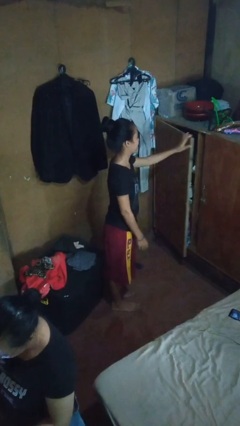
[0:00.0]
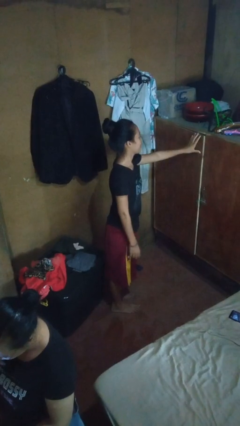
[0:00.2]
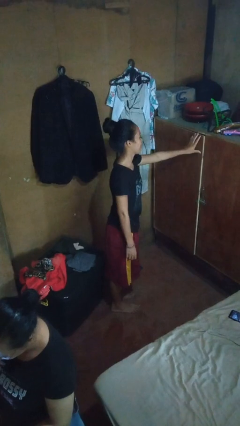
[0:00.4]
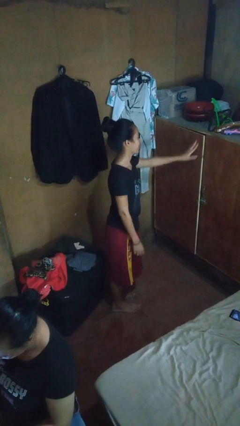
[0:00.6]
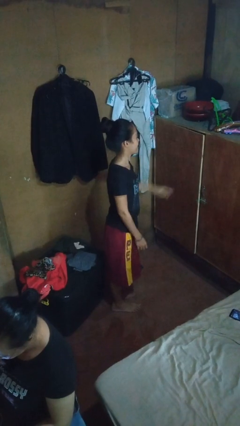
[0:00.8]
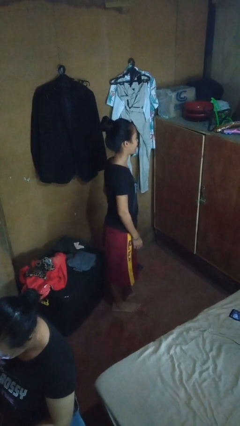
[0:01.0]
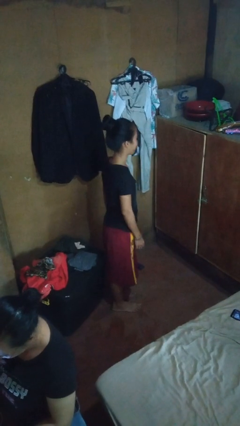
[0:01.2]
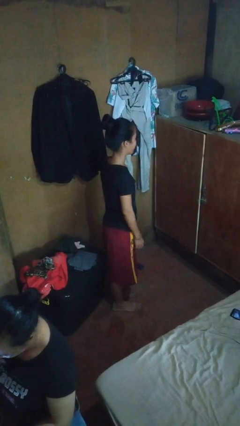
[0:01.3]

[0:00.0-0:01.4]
person closes closet door

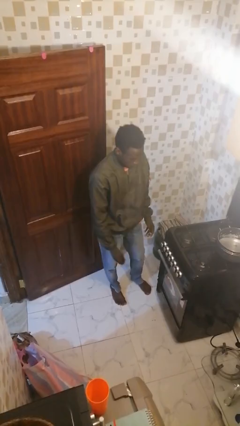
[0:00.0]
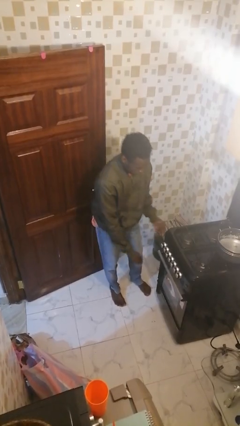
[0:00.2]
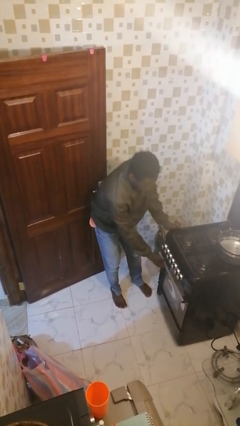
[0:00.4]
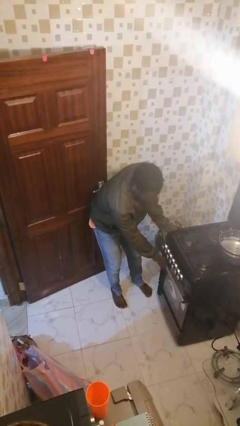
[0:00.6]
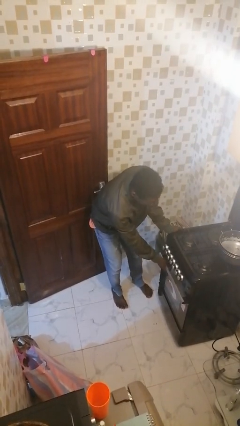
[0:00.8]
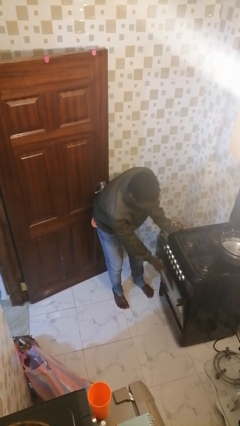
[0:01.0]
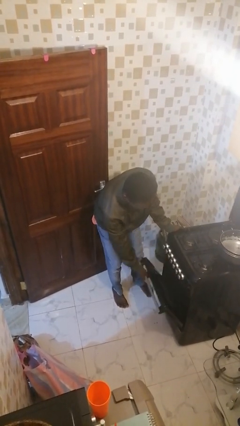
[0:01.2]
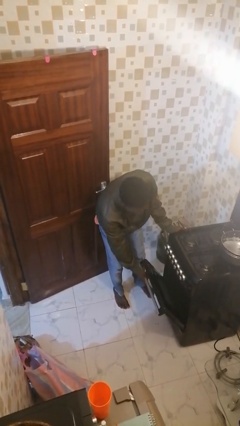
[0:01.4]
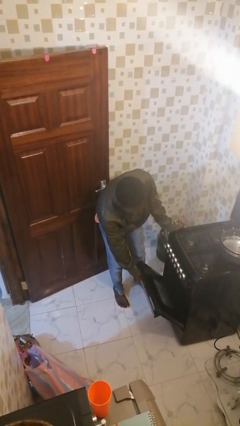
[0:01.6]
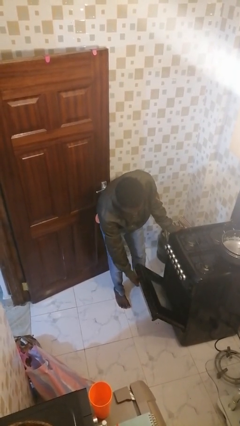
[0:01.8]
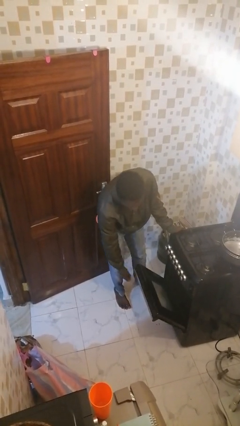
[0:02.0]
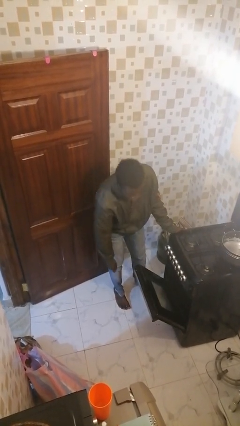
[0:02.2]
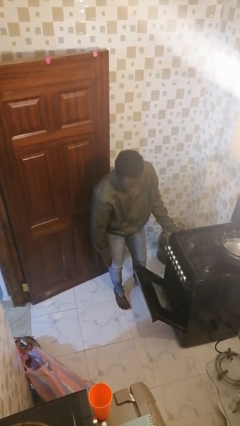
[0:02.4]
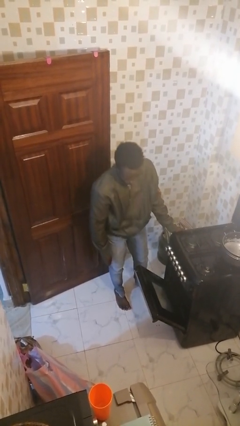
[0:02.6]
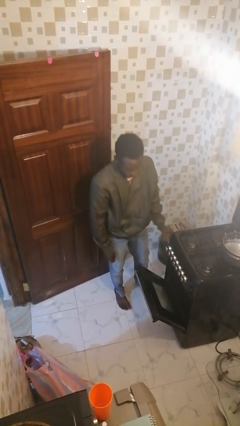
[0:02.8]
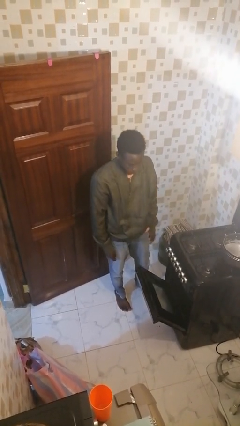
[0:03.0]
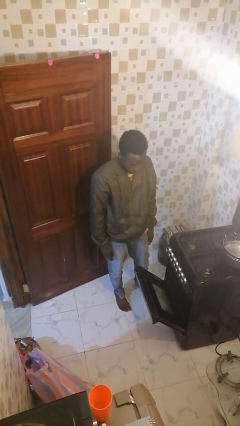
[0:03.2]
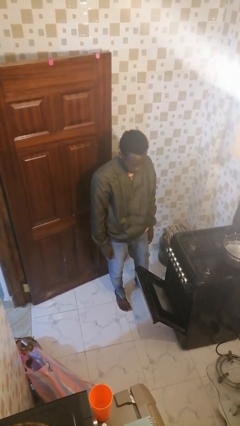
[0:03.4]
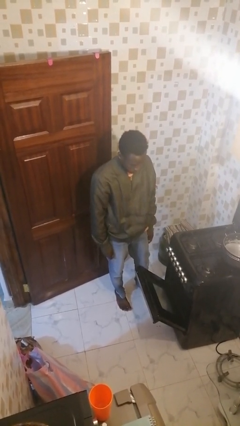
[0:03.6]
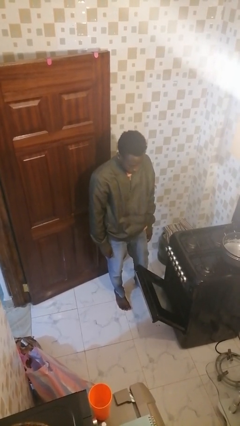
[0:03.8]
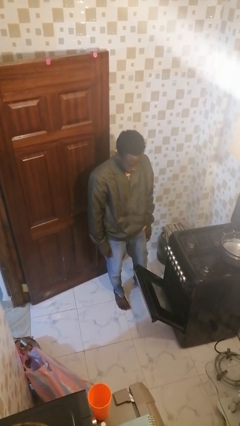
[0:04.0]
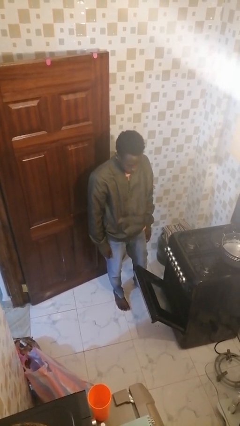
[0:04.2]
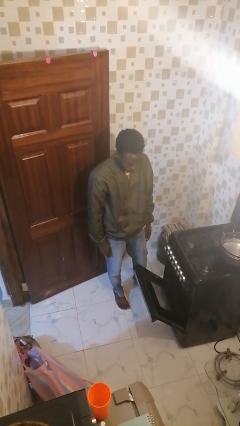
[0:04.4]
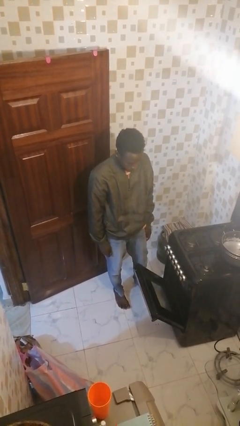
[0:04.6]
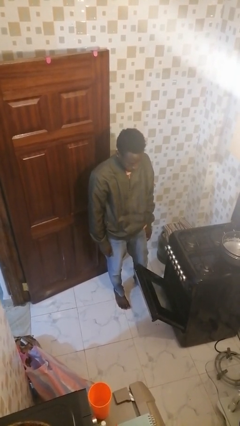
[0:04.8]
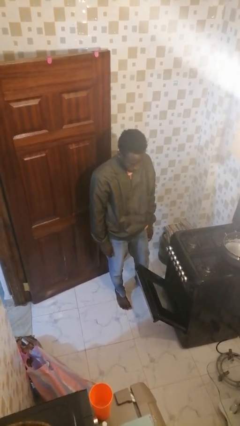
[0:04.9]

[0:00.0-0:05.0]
person opens oven door

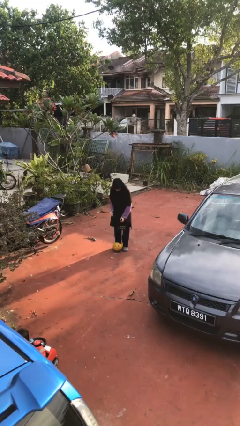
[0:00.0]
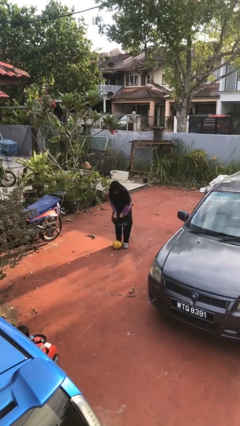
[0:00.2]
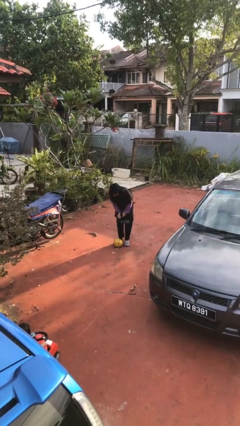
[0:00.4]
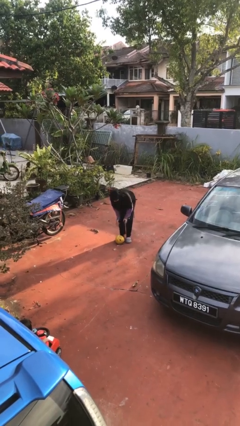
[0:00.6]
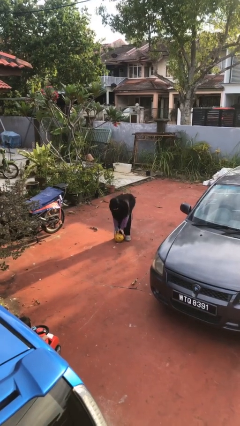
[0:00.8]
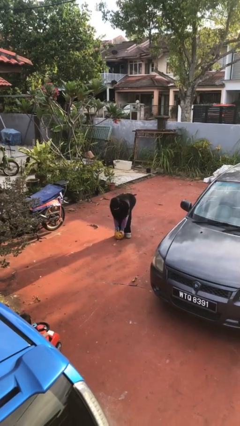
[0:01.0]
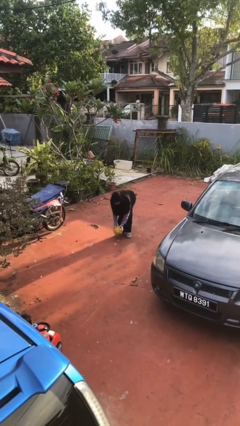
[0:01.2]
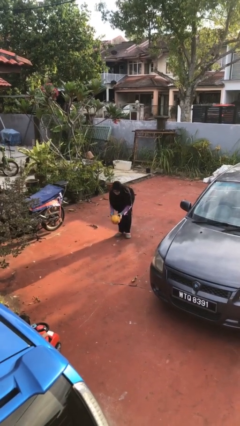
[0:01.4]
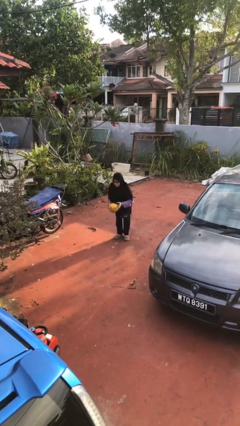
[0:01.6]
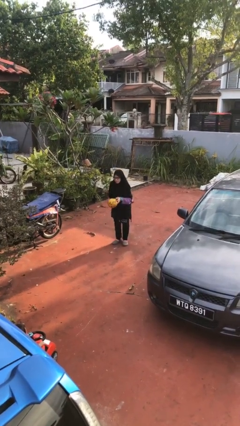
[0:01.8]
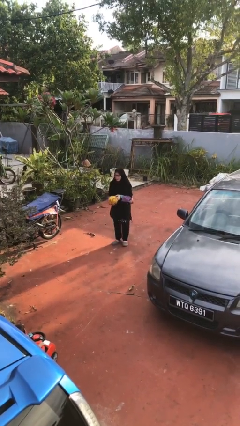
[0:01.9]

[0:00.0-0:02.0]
person picks up object from floor

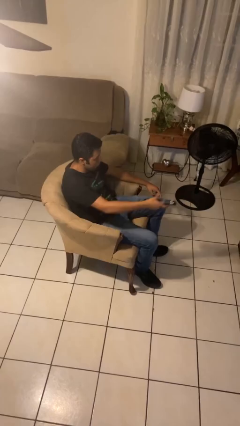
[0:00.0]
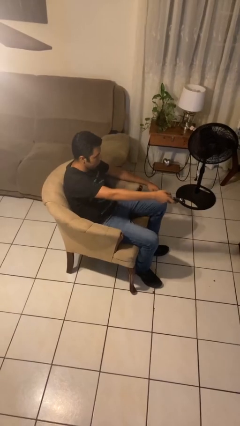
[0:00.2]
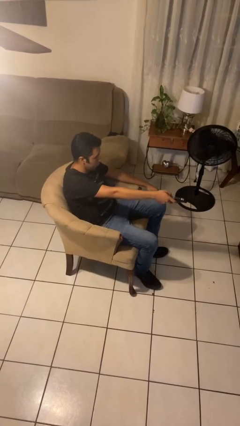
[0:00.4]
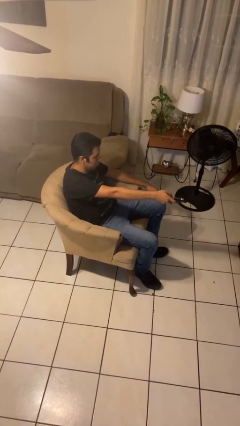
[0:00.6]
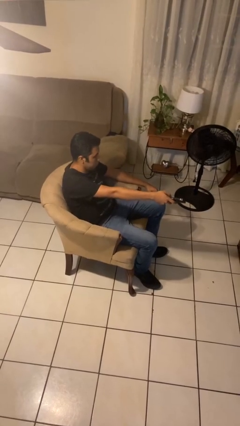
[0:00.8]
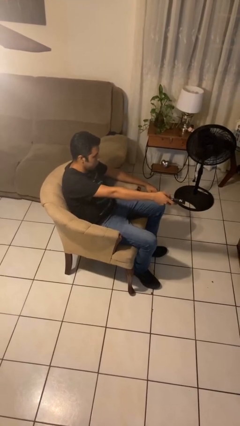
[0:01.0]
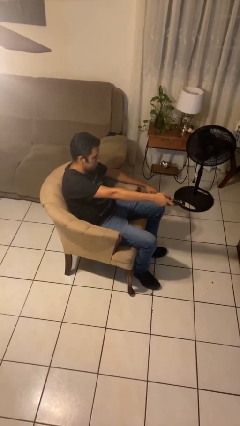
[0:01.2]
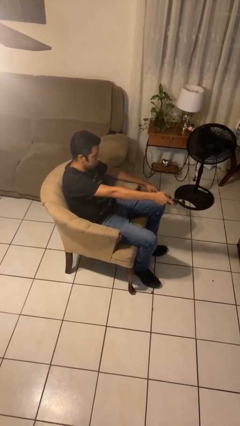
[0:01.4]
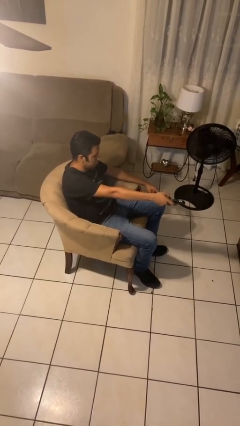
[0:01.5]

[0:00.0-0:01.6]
person uses television remote

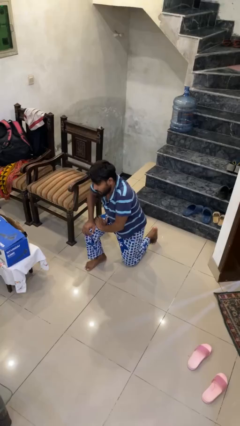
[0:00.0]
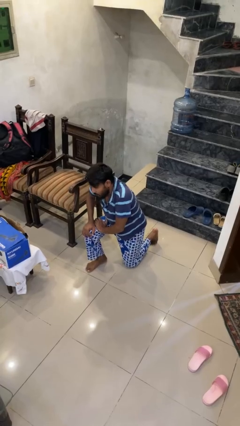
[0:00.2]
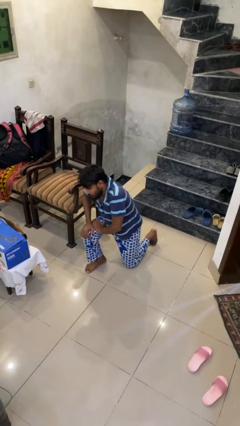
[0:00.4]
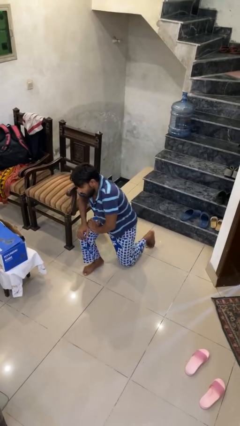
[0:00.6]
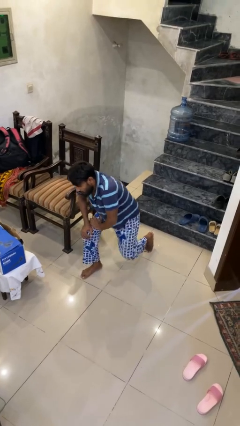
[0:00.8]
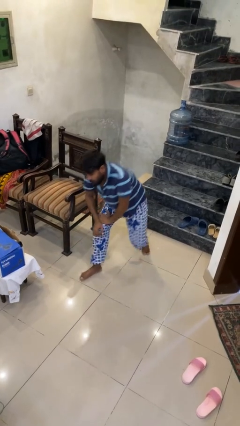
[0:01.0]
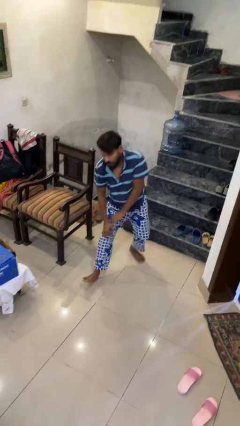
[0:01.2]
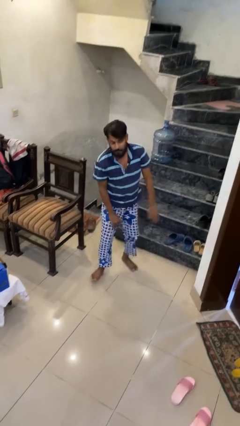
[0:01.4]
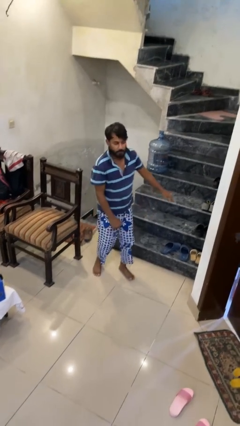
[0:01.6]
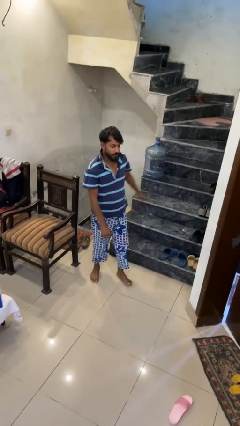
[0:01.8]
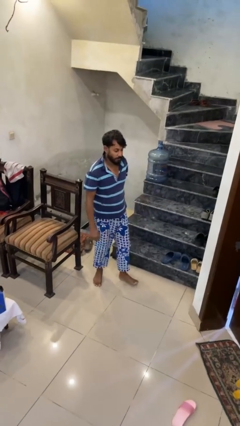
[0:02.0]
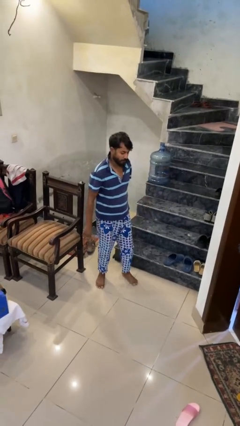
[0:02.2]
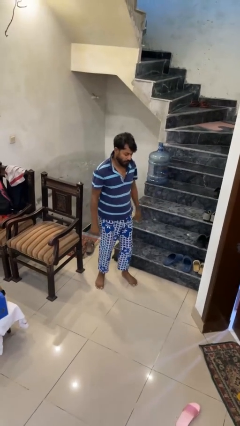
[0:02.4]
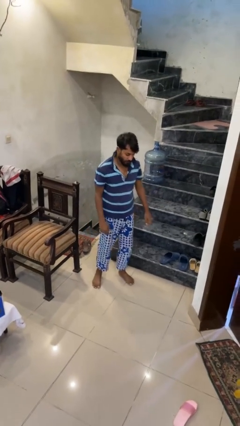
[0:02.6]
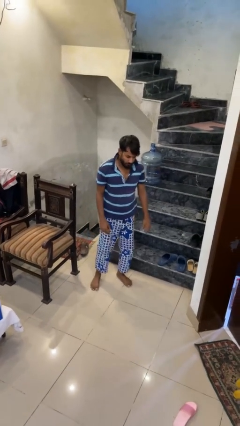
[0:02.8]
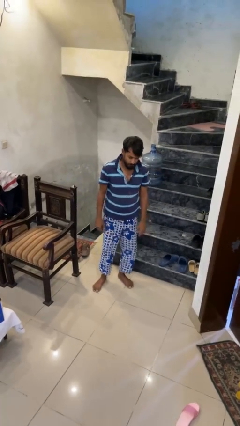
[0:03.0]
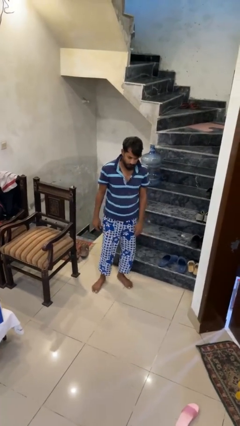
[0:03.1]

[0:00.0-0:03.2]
person stands up from floor

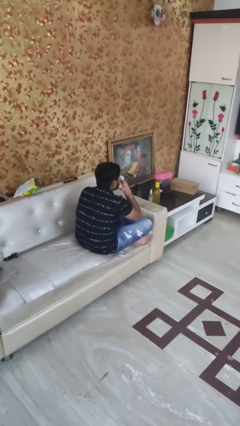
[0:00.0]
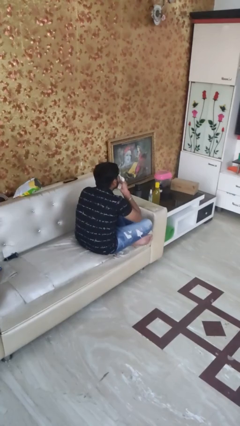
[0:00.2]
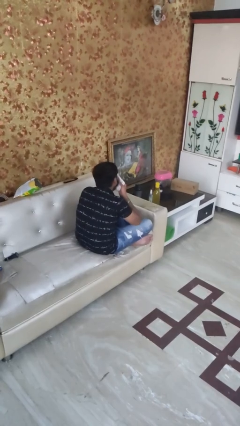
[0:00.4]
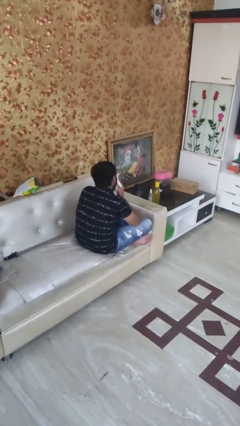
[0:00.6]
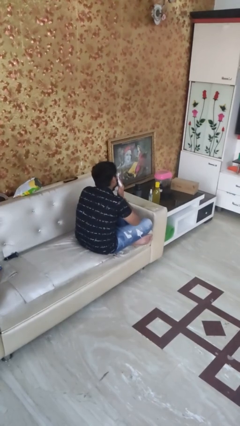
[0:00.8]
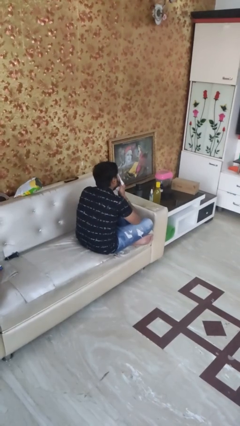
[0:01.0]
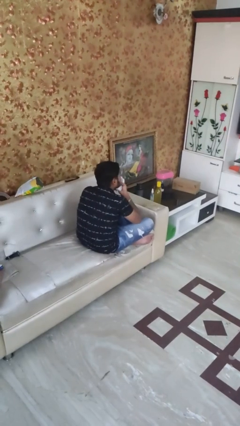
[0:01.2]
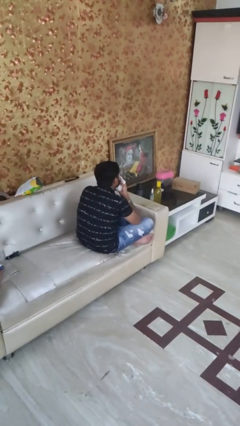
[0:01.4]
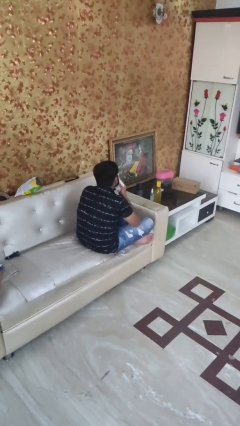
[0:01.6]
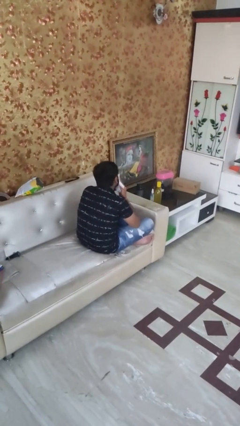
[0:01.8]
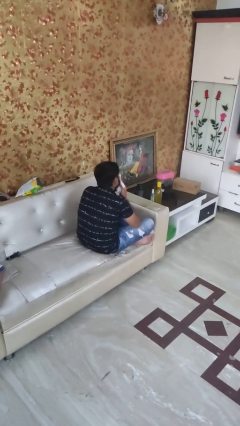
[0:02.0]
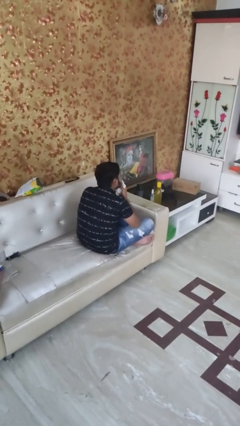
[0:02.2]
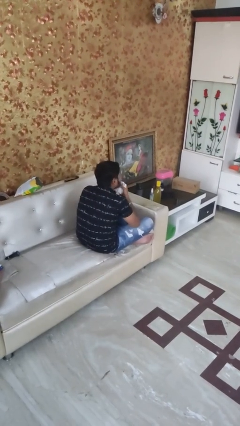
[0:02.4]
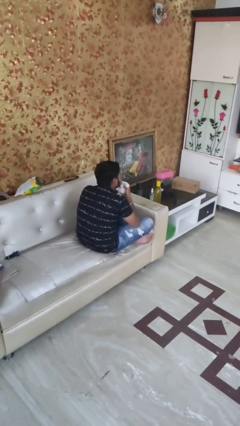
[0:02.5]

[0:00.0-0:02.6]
person wipes mouth with napkin

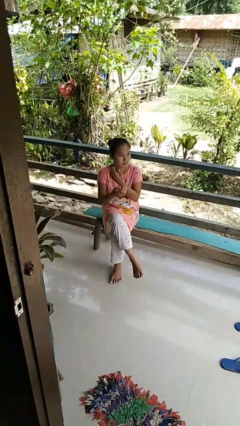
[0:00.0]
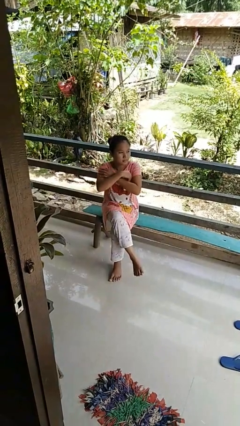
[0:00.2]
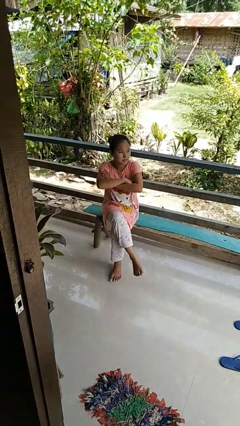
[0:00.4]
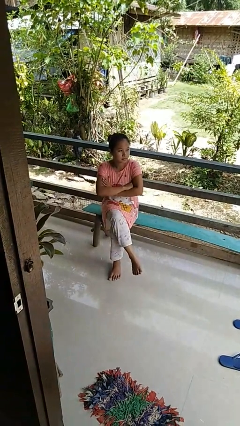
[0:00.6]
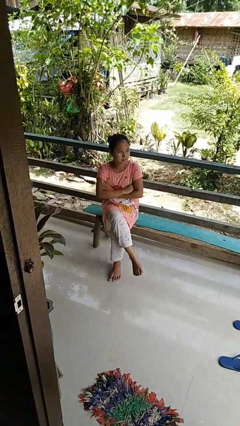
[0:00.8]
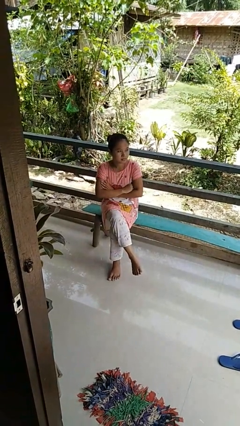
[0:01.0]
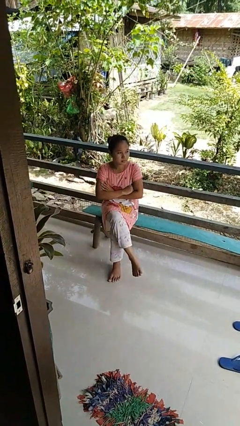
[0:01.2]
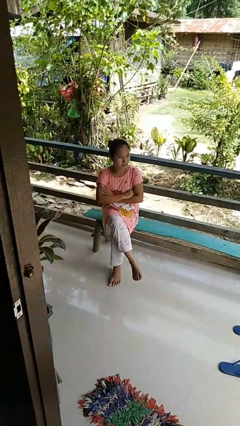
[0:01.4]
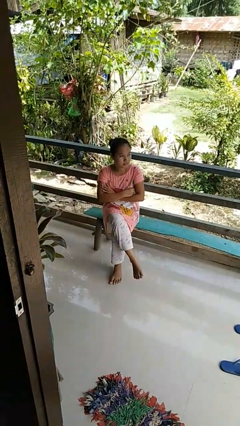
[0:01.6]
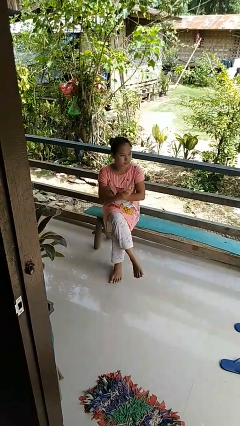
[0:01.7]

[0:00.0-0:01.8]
person crosses arms
